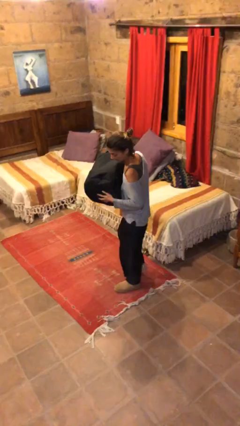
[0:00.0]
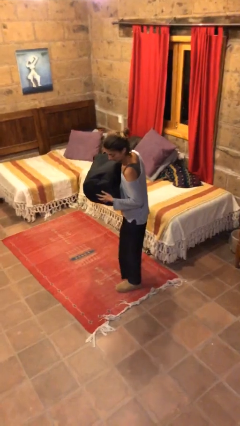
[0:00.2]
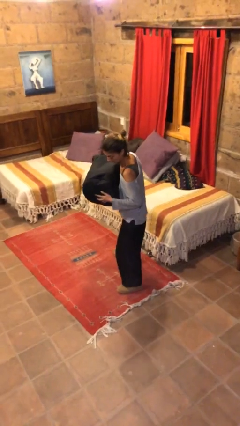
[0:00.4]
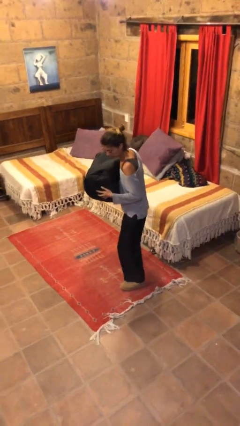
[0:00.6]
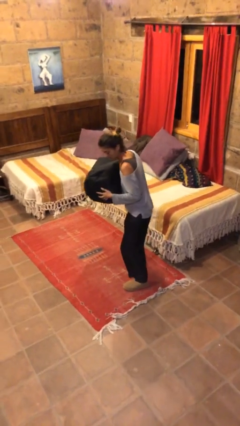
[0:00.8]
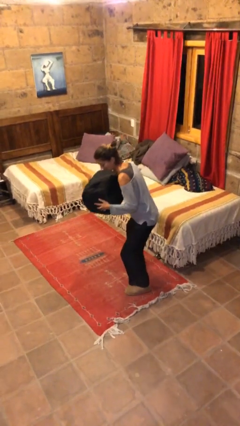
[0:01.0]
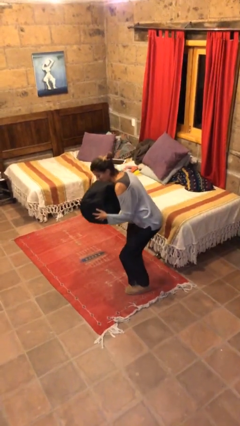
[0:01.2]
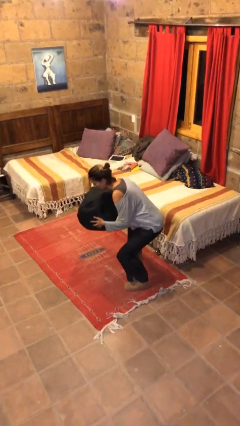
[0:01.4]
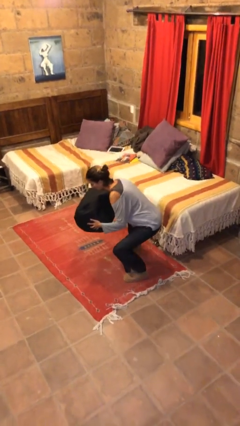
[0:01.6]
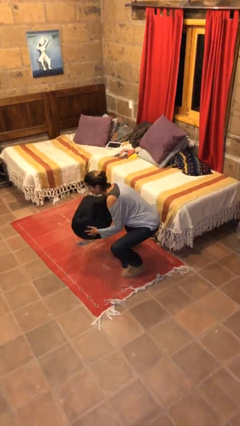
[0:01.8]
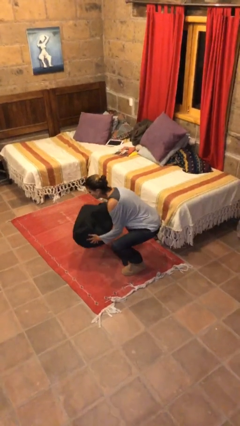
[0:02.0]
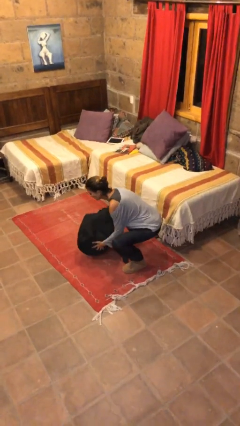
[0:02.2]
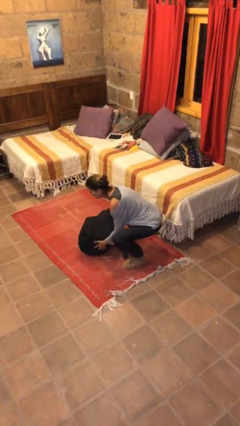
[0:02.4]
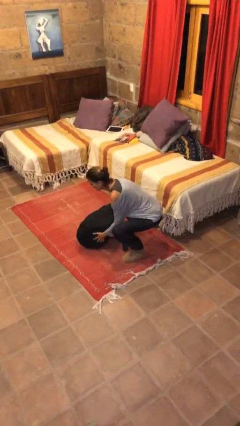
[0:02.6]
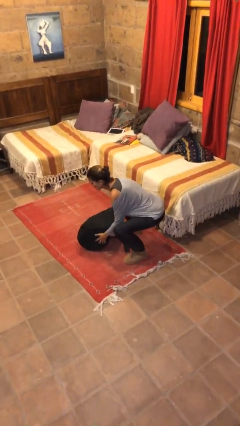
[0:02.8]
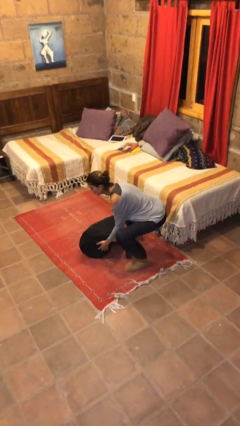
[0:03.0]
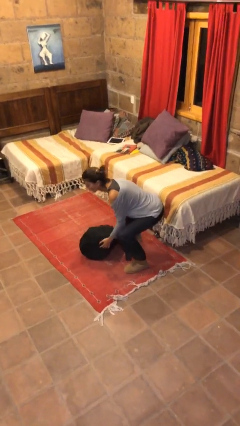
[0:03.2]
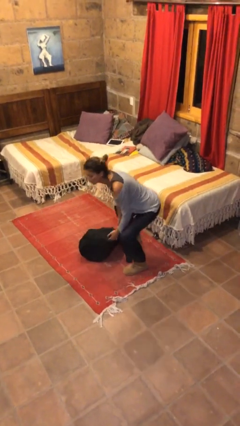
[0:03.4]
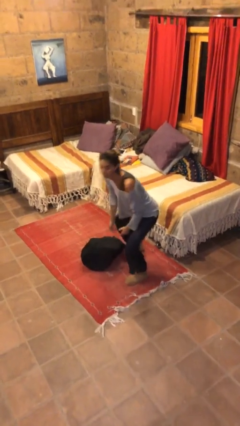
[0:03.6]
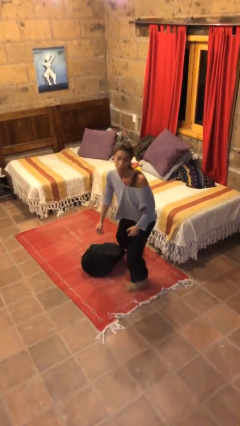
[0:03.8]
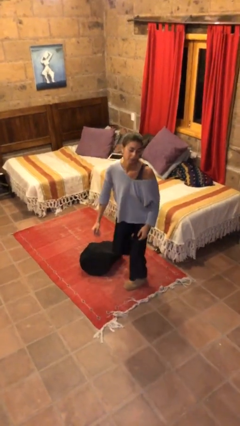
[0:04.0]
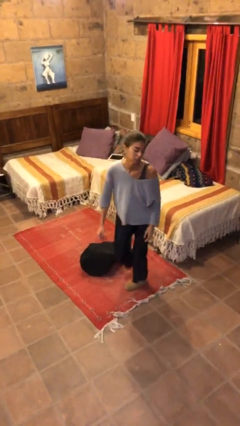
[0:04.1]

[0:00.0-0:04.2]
person puts down object on floor

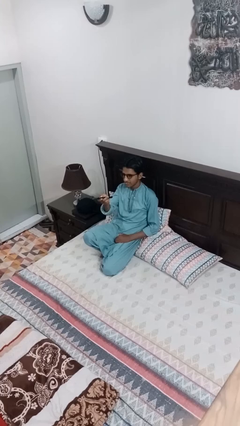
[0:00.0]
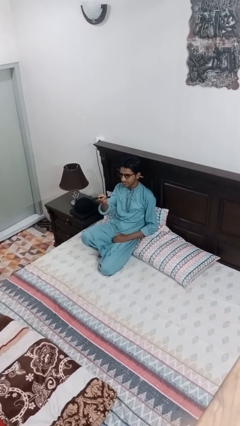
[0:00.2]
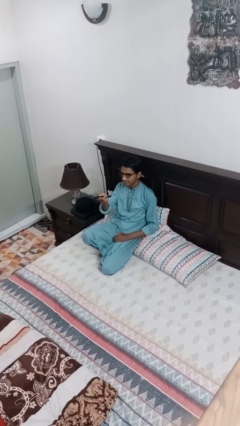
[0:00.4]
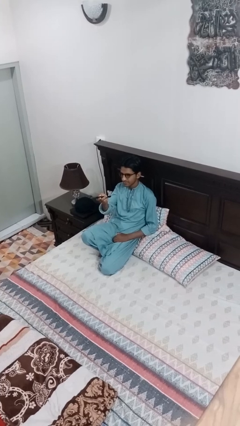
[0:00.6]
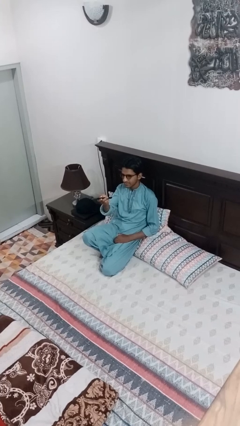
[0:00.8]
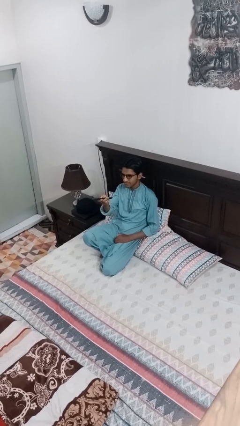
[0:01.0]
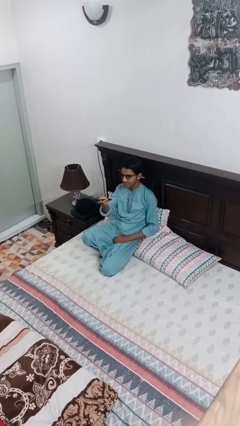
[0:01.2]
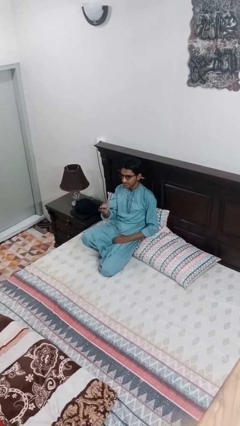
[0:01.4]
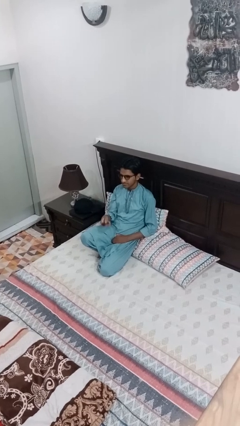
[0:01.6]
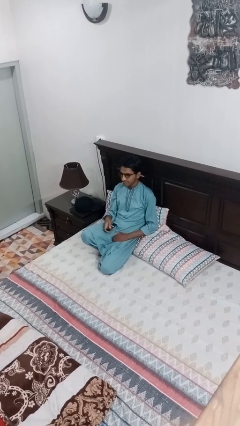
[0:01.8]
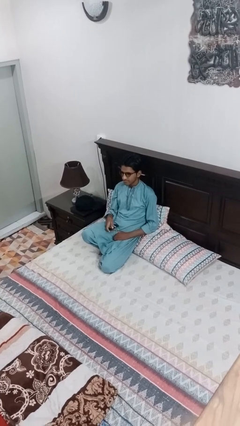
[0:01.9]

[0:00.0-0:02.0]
person uses television remote

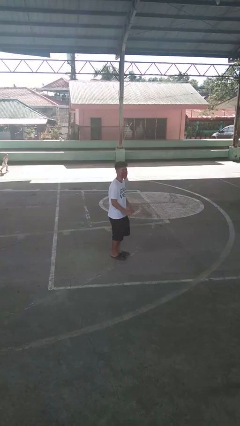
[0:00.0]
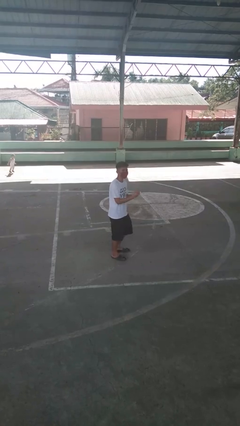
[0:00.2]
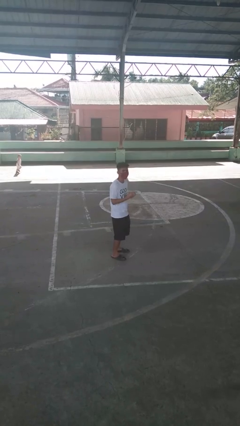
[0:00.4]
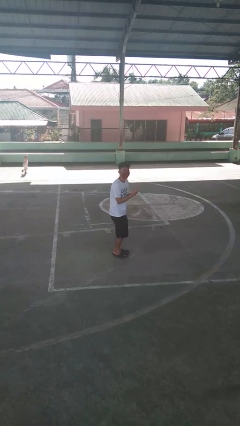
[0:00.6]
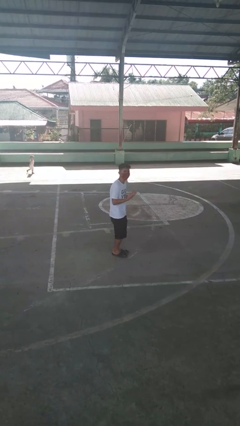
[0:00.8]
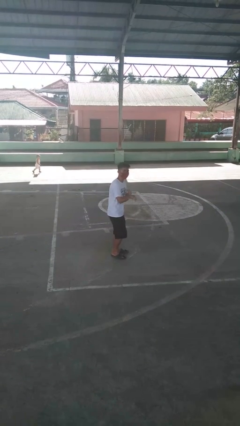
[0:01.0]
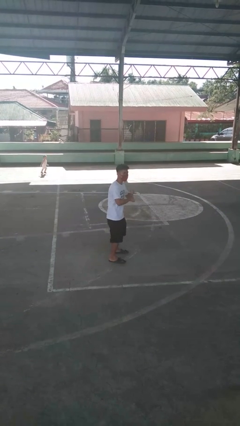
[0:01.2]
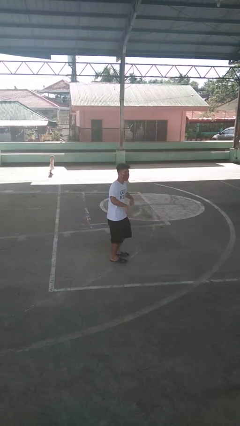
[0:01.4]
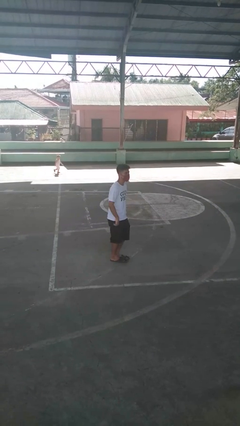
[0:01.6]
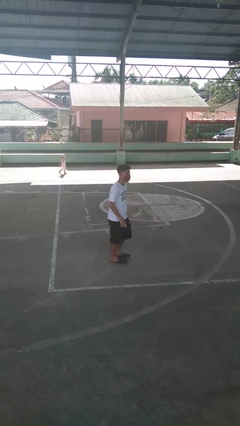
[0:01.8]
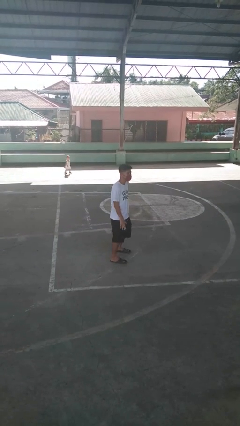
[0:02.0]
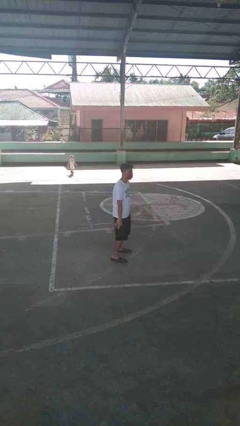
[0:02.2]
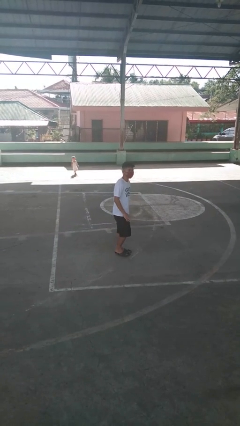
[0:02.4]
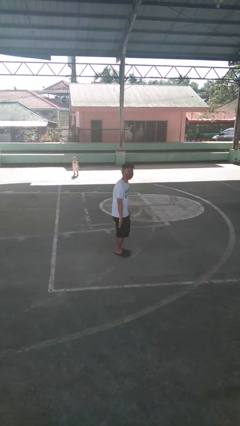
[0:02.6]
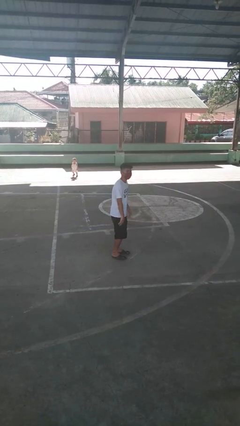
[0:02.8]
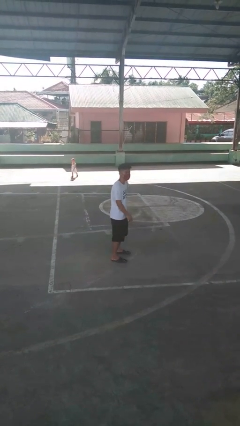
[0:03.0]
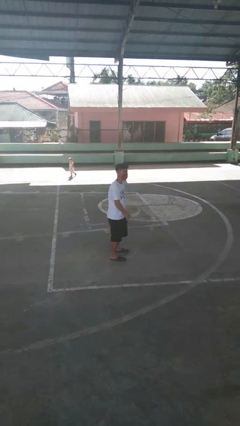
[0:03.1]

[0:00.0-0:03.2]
person dances in place

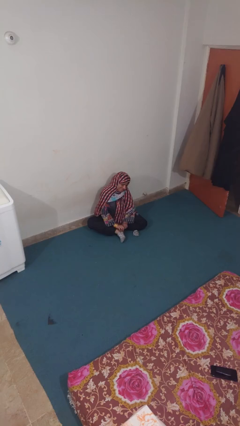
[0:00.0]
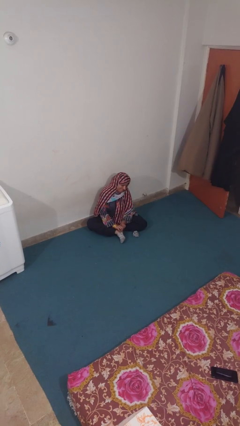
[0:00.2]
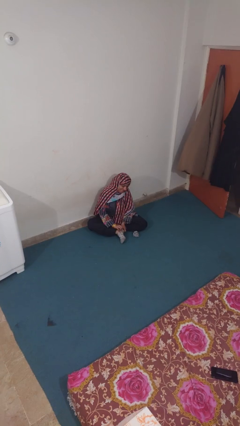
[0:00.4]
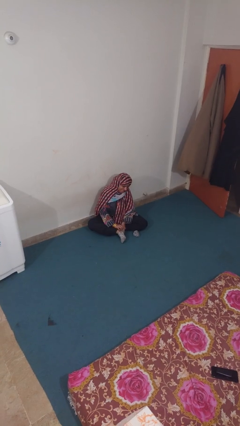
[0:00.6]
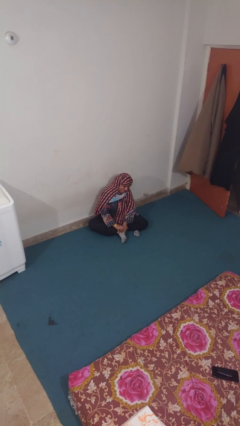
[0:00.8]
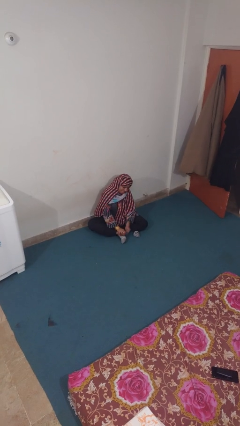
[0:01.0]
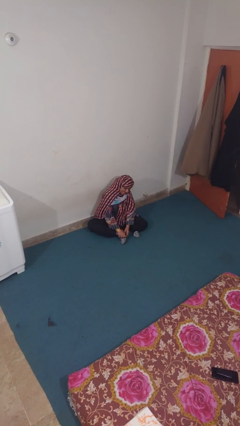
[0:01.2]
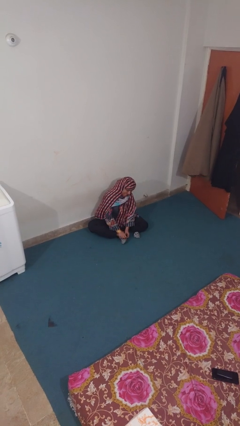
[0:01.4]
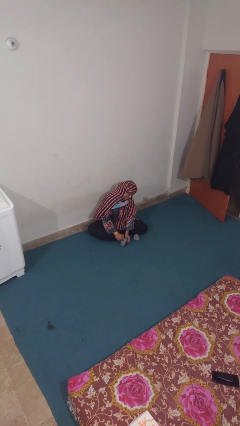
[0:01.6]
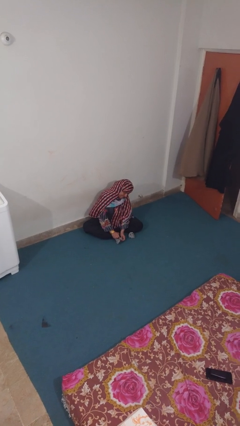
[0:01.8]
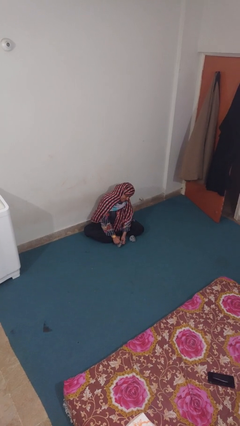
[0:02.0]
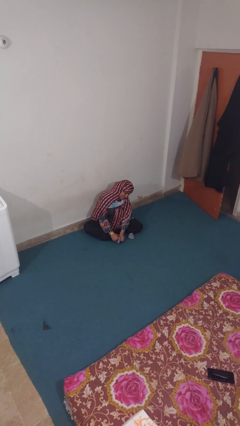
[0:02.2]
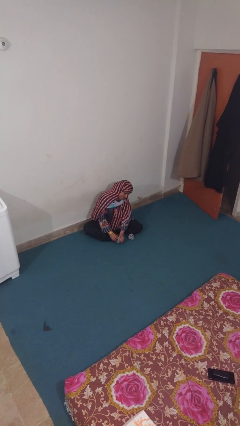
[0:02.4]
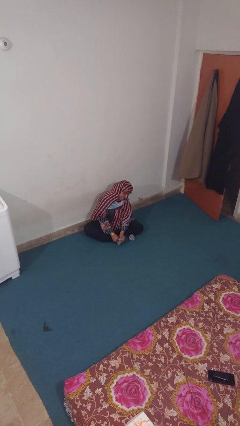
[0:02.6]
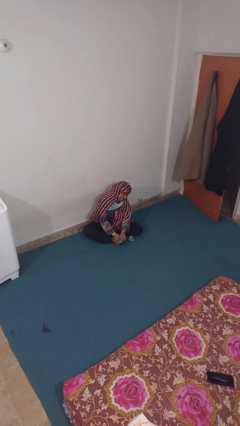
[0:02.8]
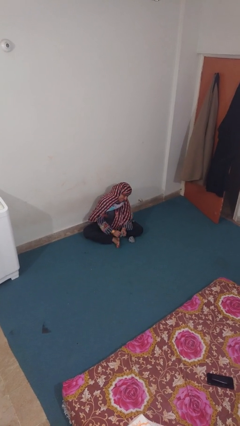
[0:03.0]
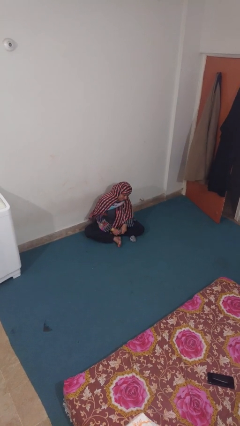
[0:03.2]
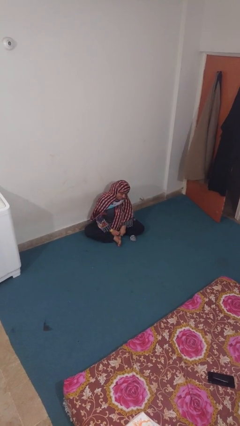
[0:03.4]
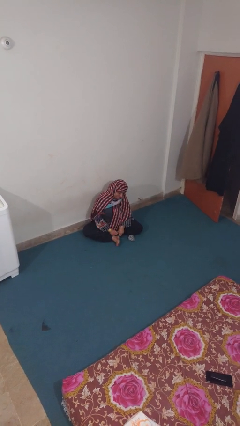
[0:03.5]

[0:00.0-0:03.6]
person takes off socks

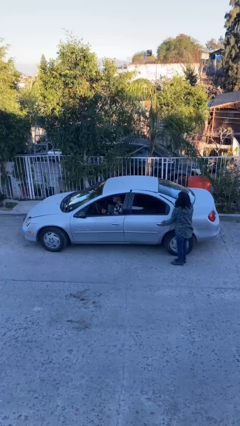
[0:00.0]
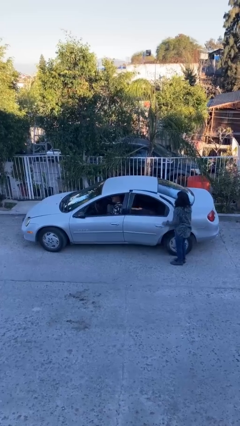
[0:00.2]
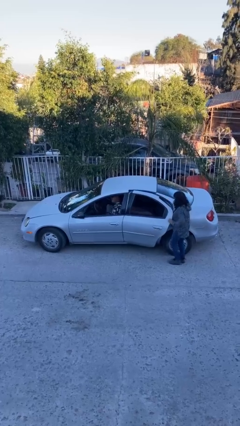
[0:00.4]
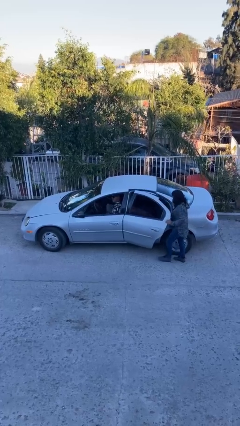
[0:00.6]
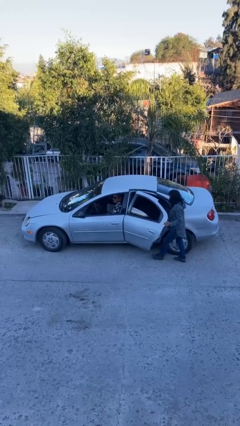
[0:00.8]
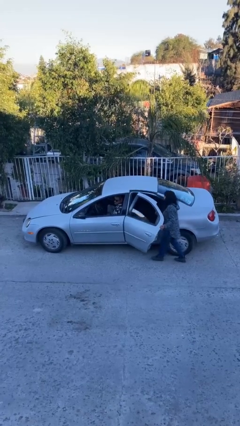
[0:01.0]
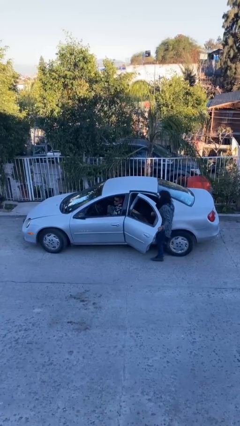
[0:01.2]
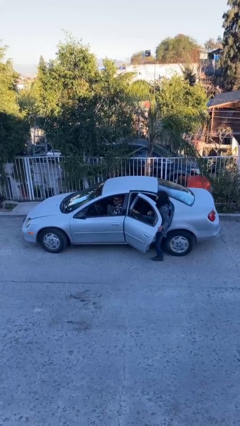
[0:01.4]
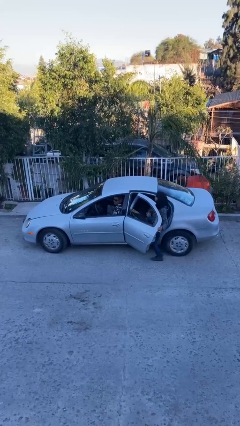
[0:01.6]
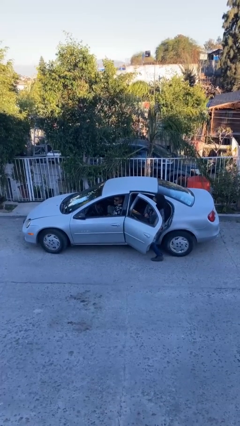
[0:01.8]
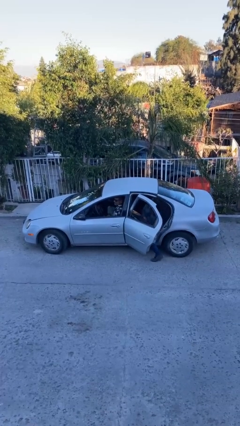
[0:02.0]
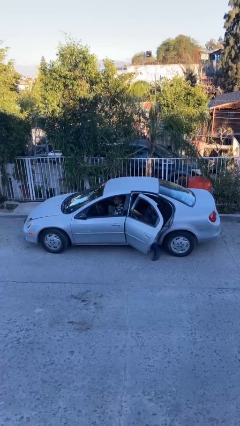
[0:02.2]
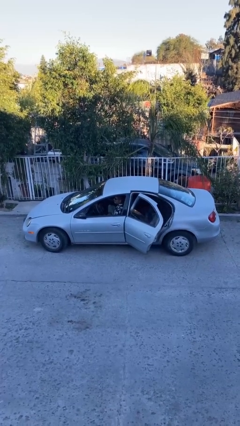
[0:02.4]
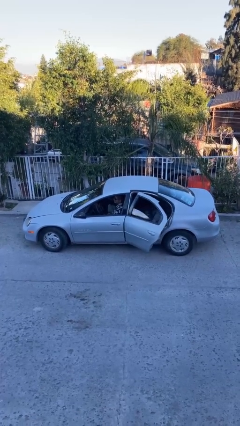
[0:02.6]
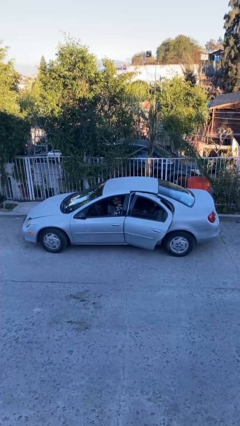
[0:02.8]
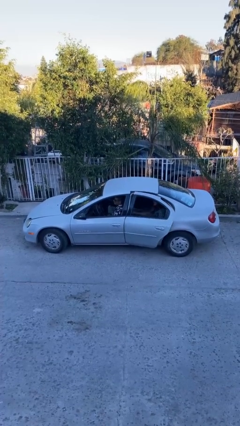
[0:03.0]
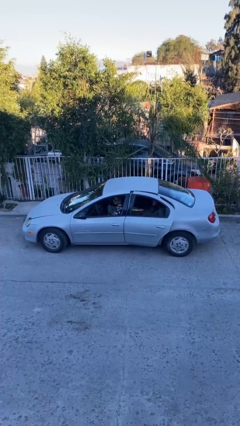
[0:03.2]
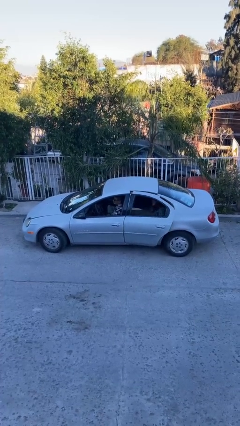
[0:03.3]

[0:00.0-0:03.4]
car picks up person

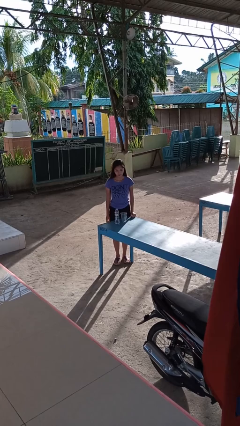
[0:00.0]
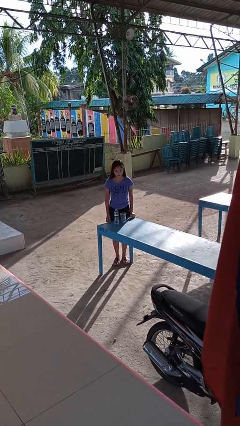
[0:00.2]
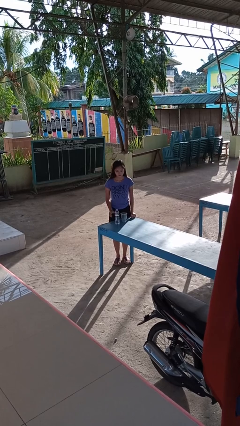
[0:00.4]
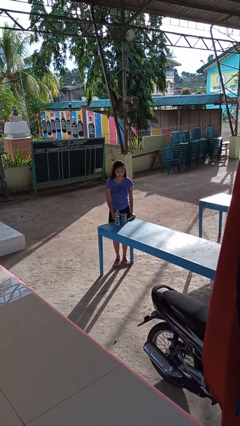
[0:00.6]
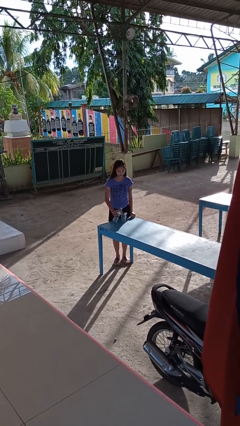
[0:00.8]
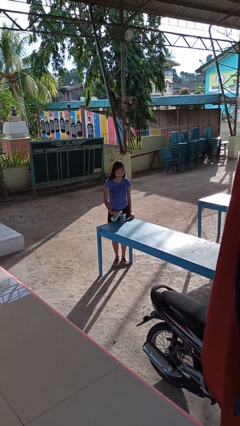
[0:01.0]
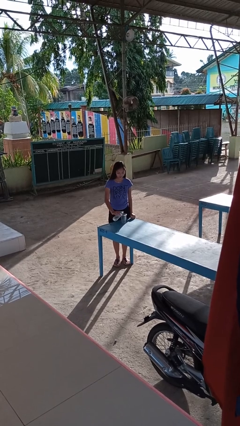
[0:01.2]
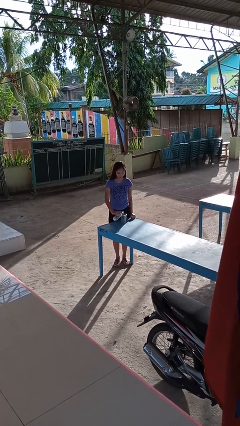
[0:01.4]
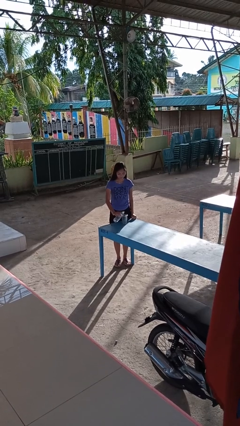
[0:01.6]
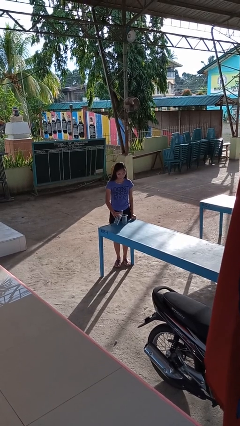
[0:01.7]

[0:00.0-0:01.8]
person pours liquid into cup
